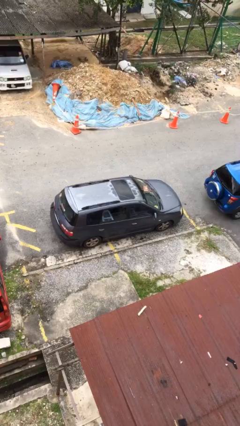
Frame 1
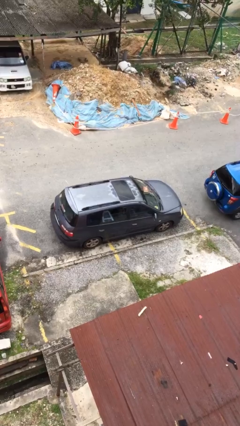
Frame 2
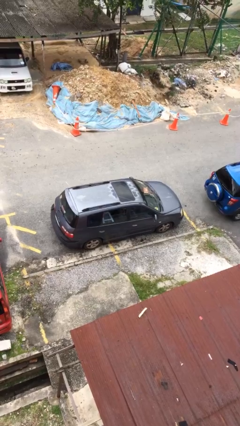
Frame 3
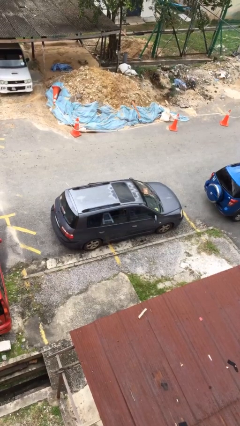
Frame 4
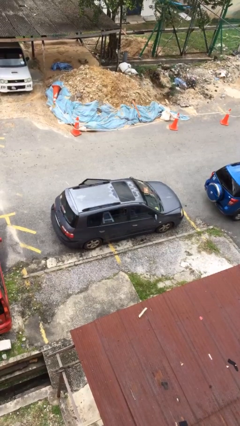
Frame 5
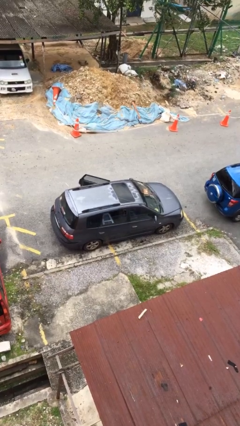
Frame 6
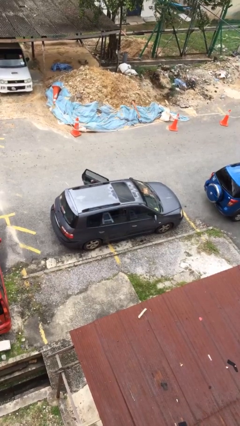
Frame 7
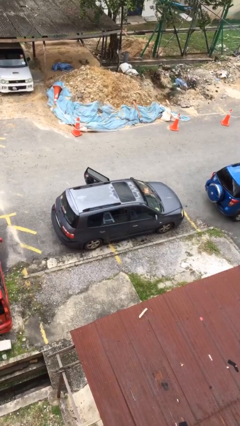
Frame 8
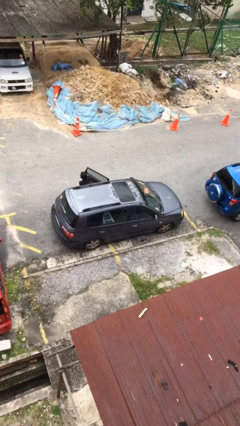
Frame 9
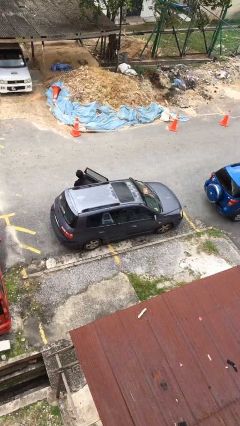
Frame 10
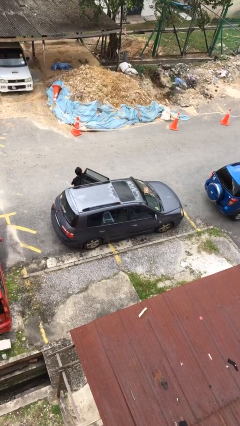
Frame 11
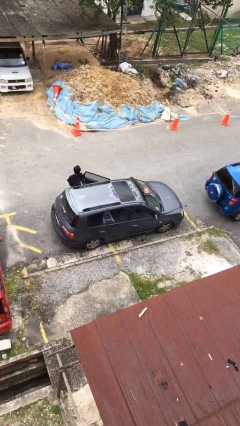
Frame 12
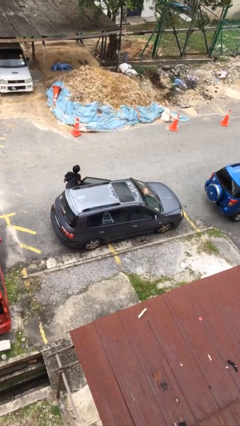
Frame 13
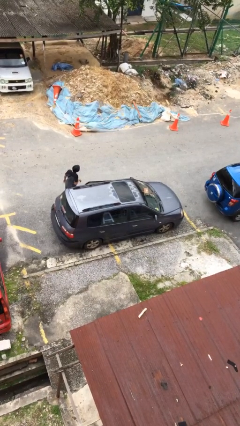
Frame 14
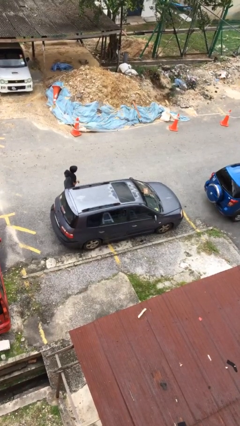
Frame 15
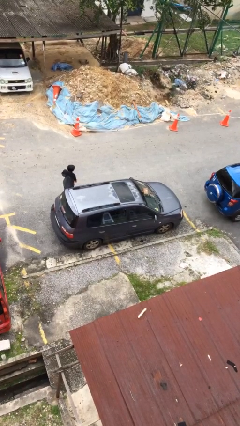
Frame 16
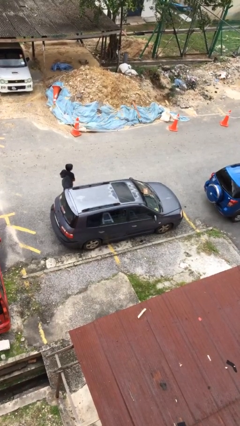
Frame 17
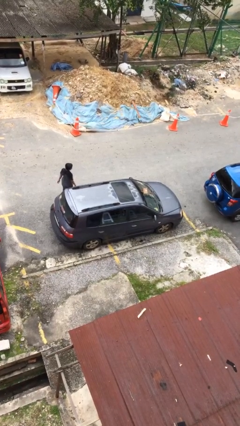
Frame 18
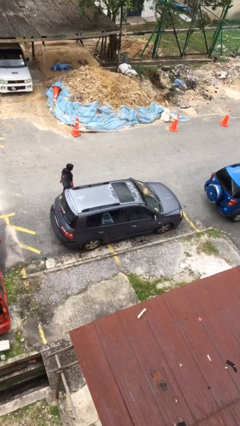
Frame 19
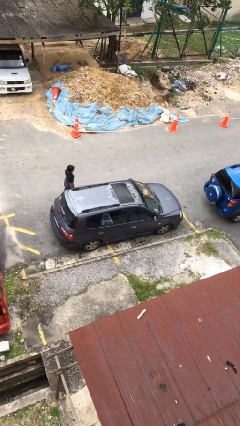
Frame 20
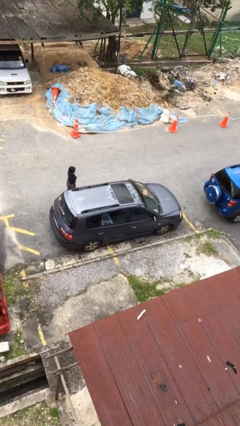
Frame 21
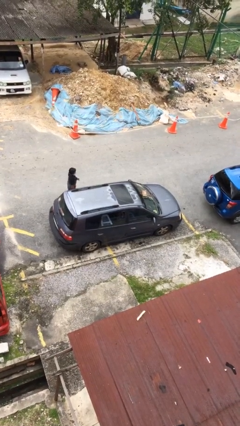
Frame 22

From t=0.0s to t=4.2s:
car drops off person

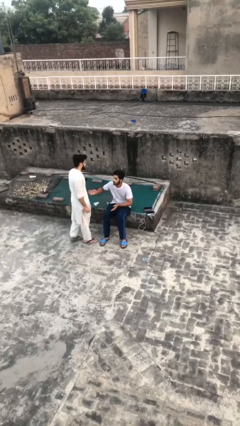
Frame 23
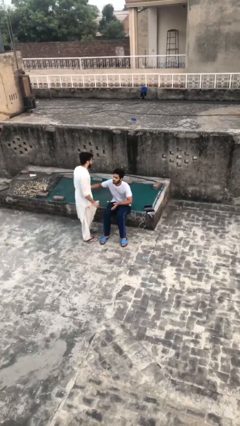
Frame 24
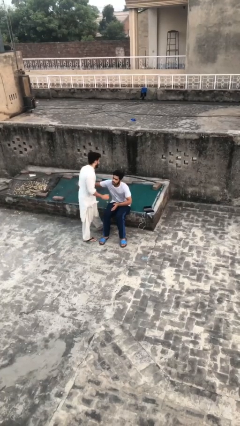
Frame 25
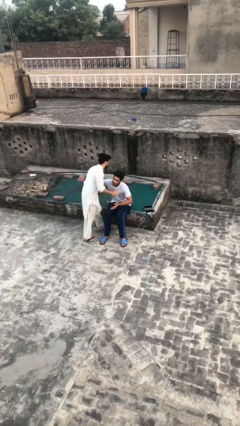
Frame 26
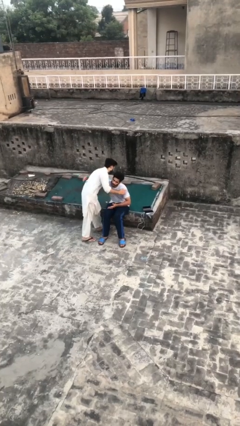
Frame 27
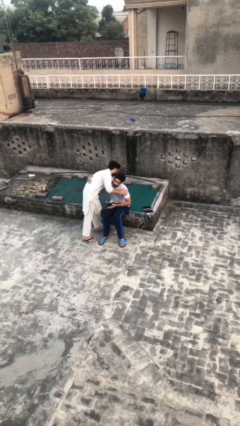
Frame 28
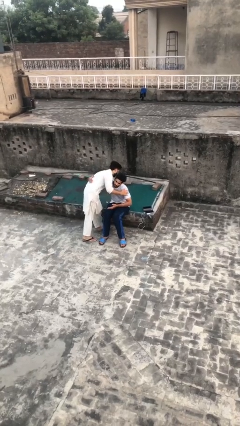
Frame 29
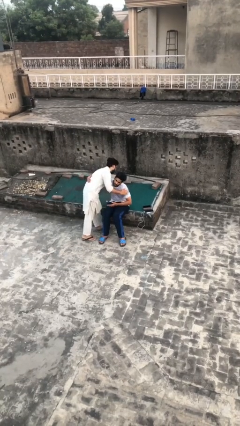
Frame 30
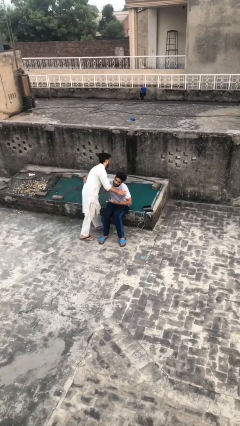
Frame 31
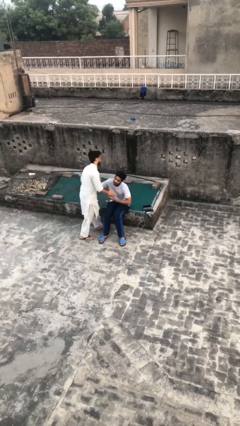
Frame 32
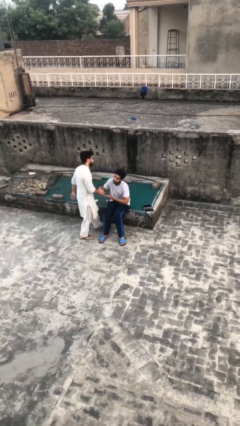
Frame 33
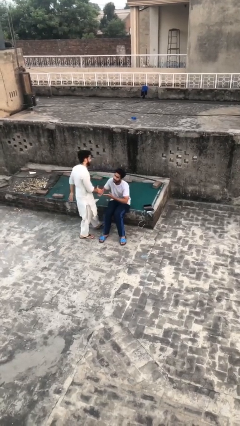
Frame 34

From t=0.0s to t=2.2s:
person embraces person

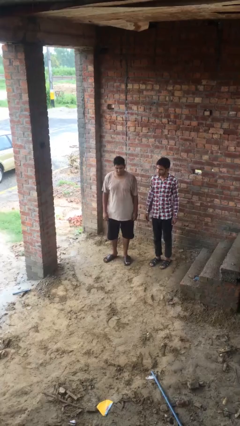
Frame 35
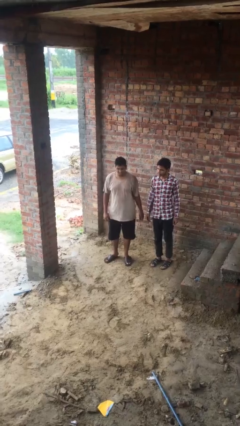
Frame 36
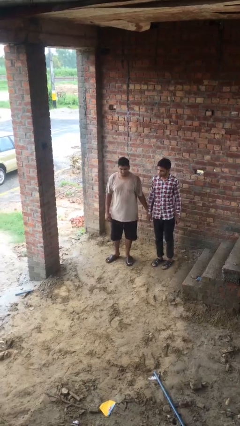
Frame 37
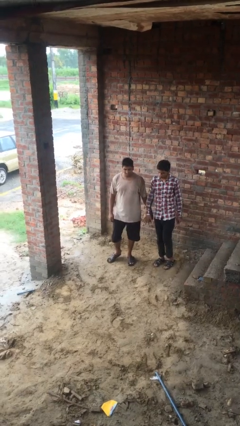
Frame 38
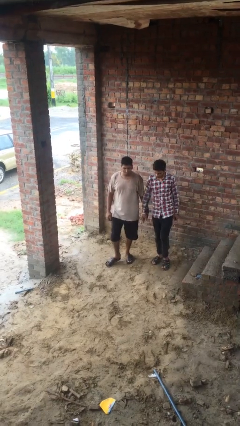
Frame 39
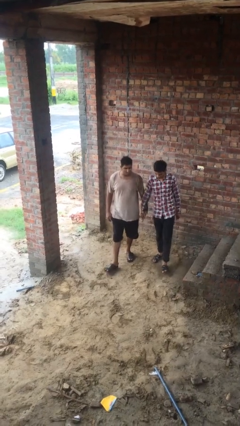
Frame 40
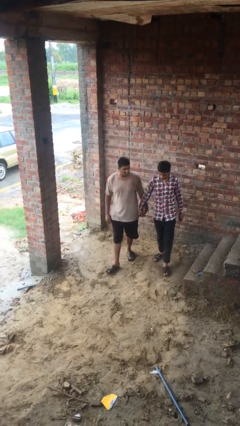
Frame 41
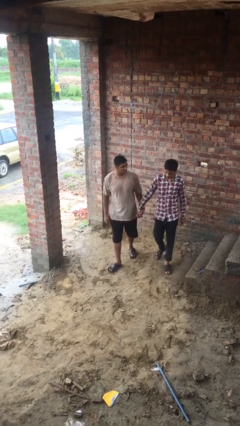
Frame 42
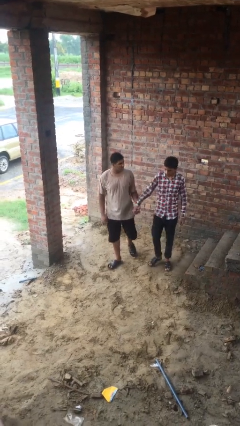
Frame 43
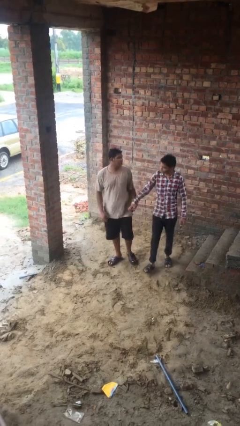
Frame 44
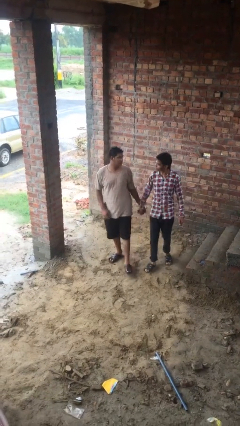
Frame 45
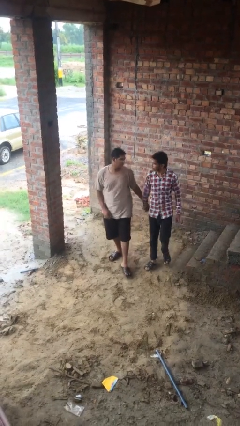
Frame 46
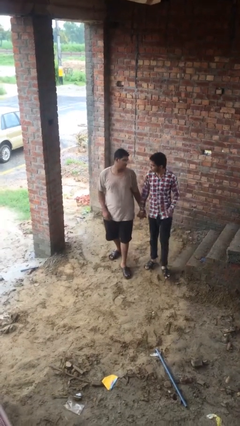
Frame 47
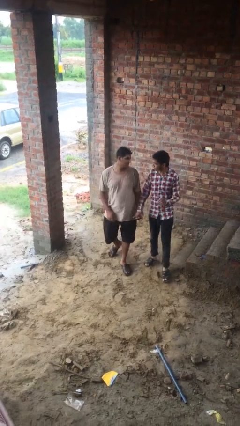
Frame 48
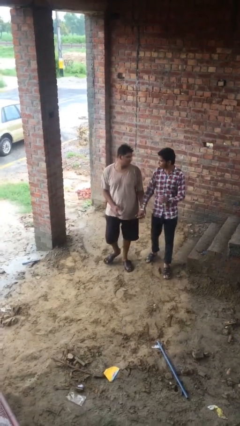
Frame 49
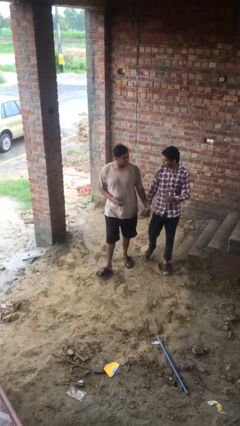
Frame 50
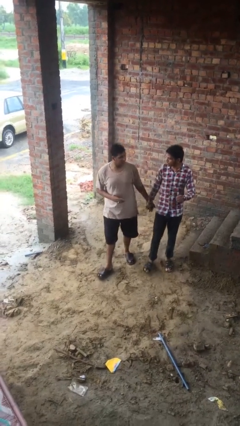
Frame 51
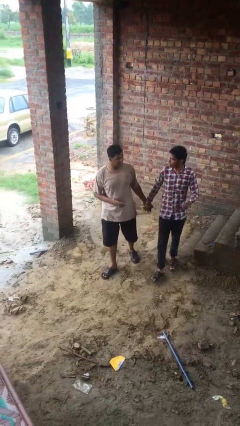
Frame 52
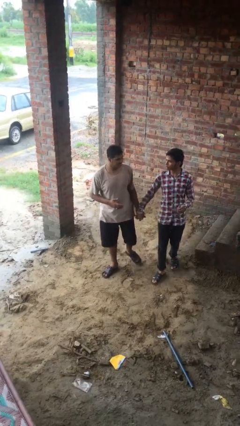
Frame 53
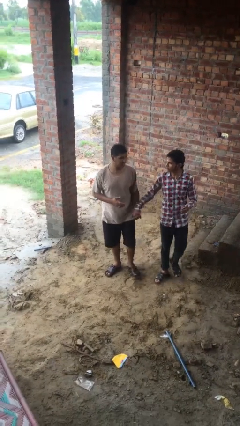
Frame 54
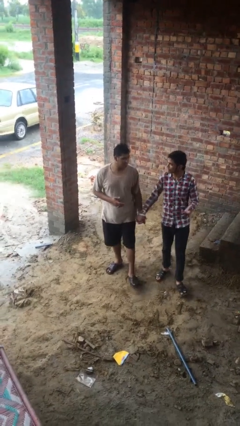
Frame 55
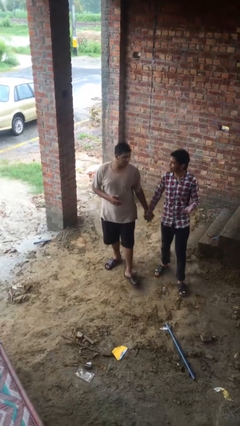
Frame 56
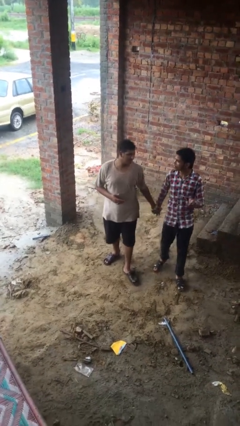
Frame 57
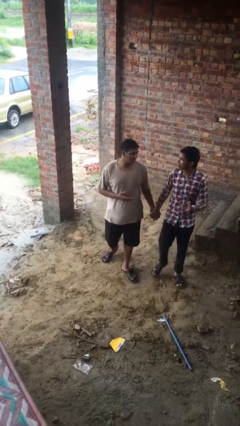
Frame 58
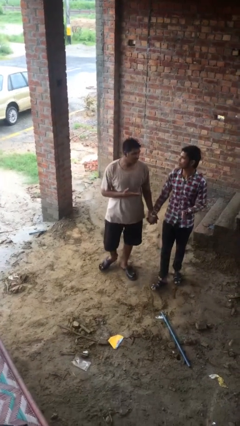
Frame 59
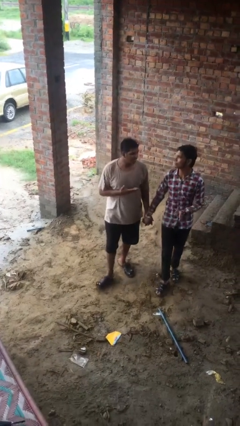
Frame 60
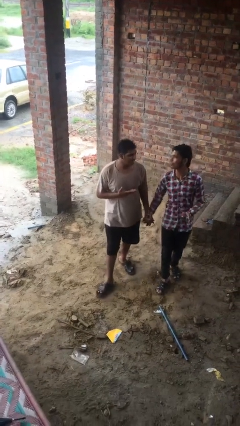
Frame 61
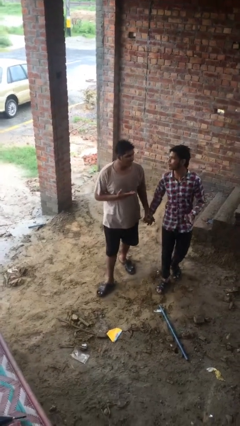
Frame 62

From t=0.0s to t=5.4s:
person holds hand

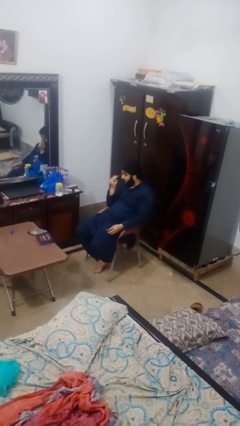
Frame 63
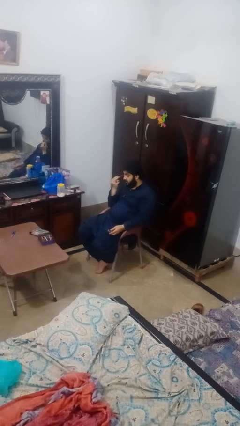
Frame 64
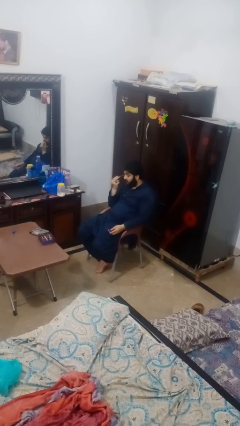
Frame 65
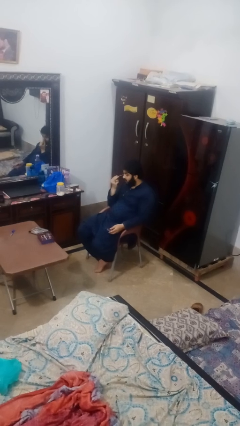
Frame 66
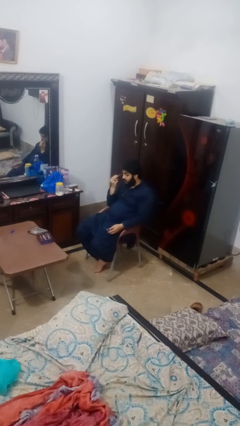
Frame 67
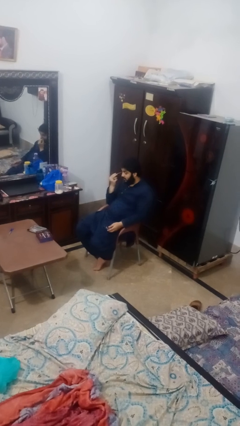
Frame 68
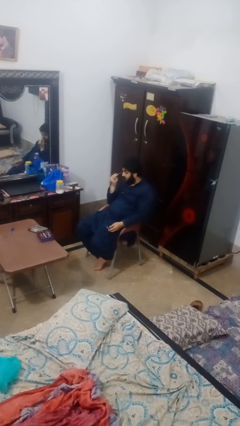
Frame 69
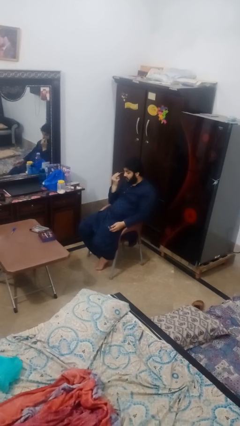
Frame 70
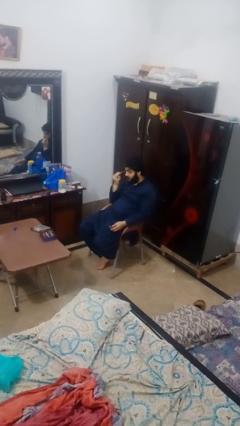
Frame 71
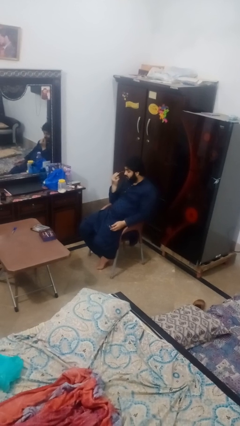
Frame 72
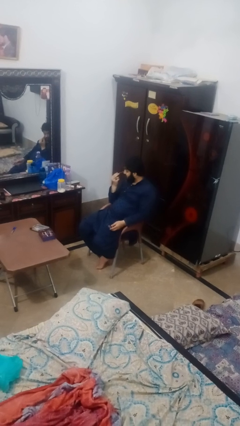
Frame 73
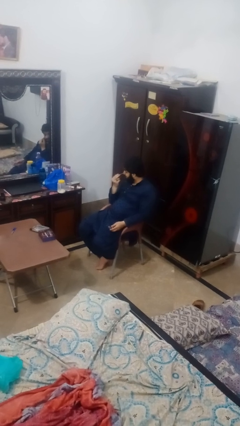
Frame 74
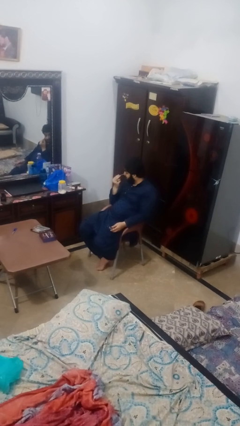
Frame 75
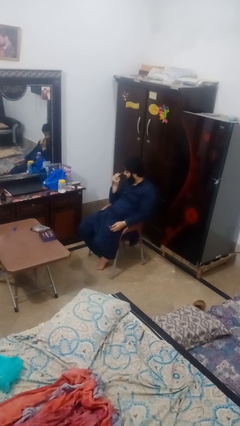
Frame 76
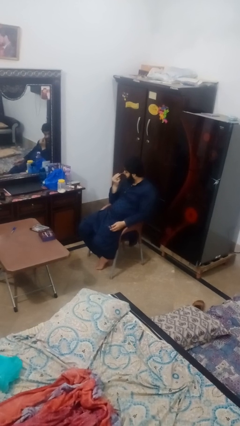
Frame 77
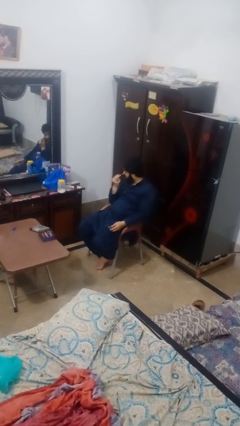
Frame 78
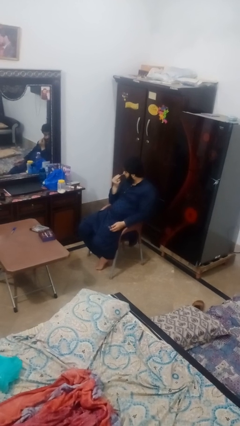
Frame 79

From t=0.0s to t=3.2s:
person applies eye makeup

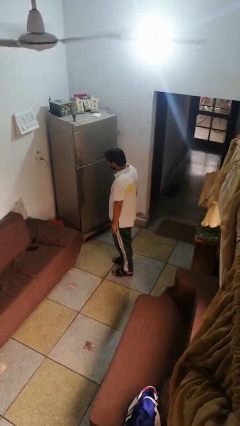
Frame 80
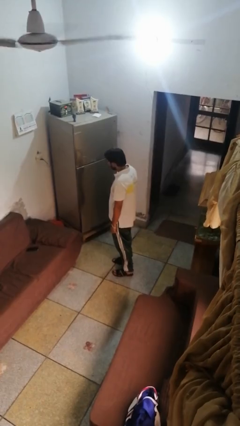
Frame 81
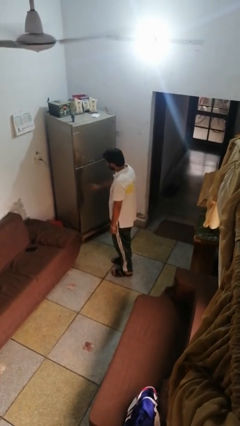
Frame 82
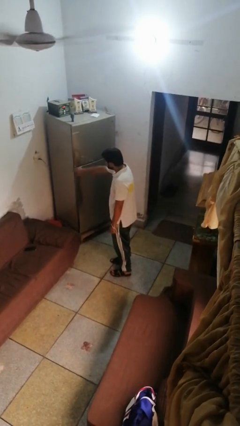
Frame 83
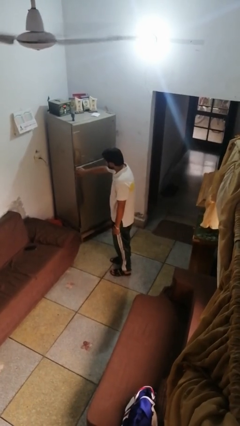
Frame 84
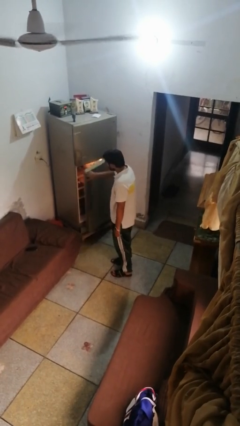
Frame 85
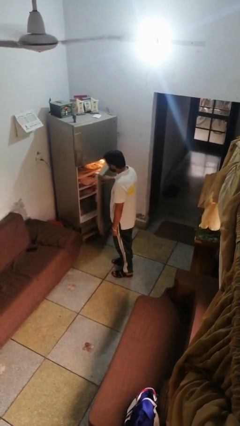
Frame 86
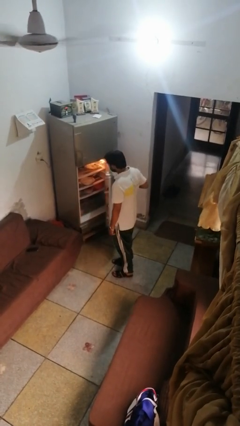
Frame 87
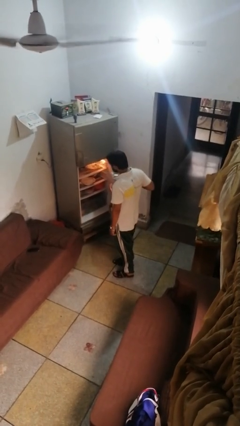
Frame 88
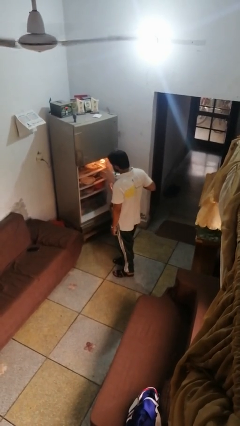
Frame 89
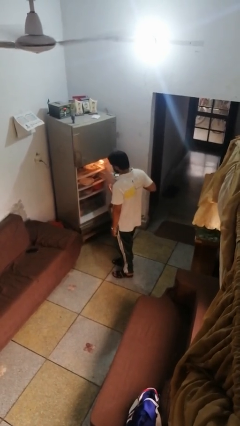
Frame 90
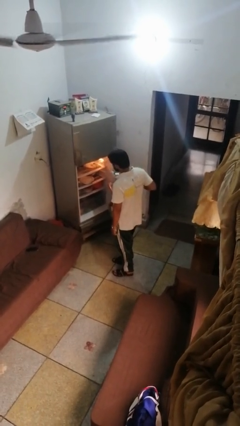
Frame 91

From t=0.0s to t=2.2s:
person opens refrigerator
